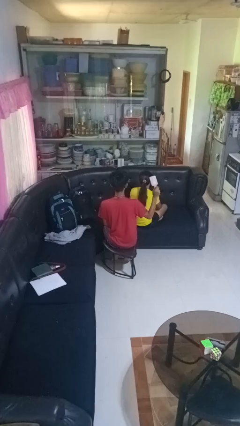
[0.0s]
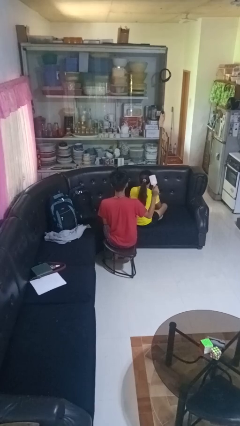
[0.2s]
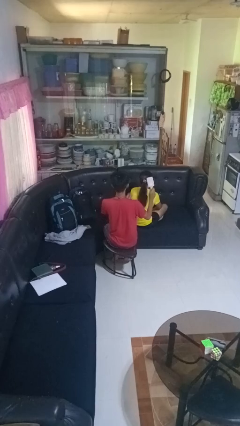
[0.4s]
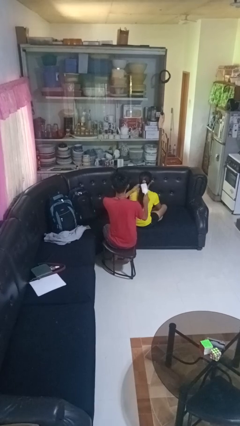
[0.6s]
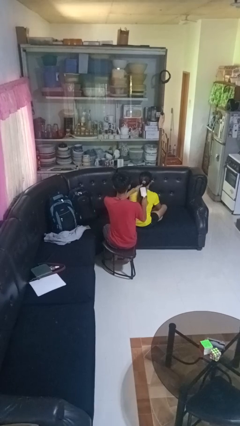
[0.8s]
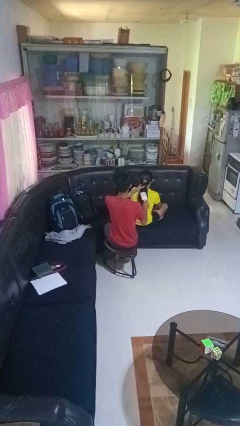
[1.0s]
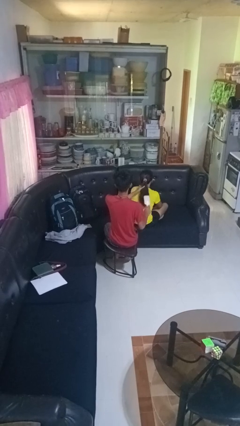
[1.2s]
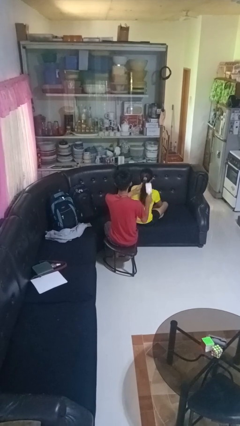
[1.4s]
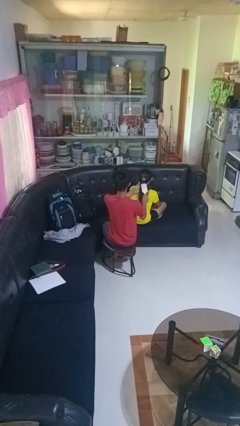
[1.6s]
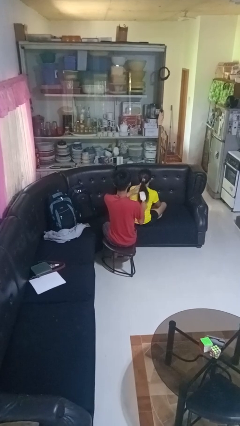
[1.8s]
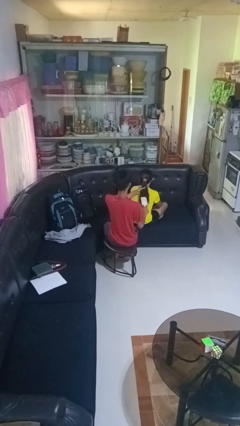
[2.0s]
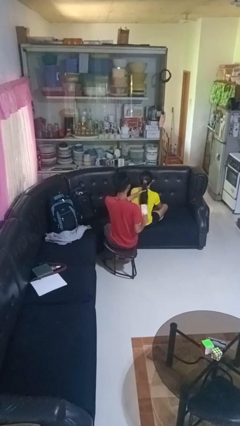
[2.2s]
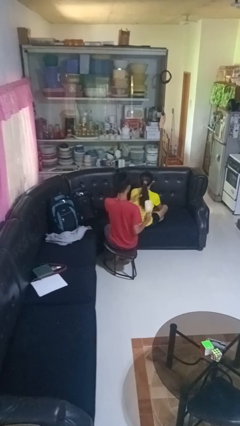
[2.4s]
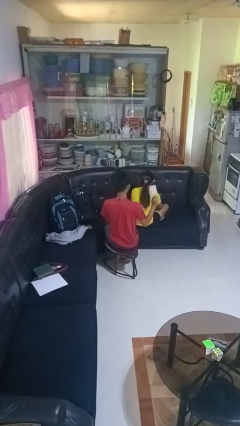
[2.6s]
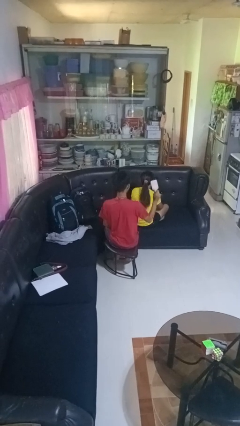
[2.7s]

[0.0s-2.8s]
person brushes hair of person

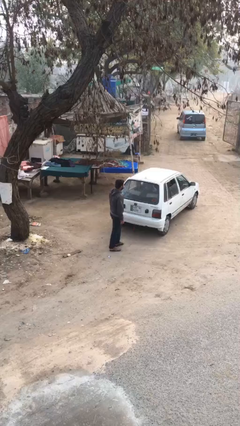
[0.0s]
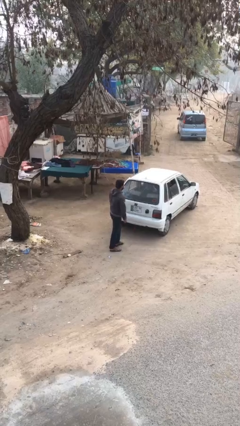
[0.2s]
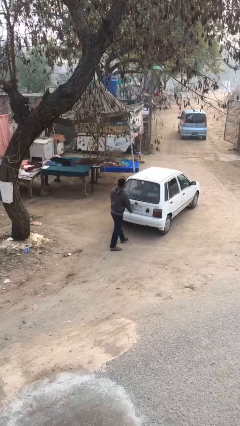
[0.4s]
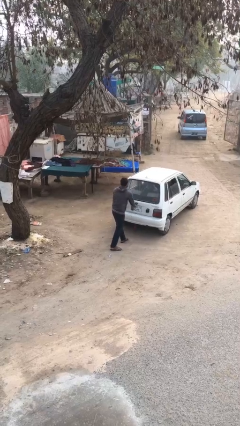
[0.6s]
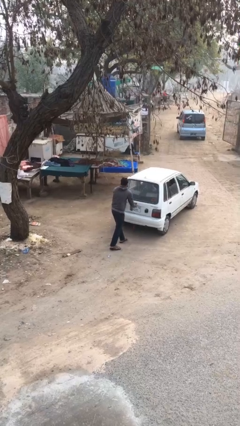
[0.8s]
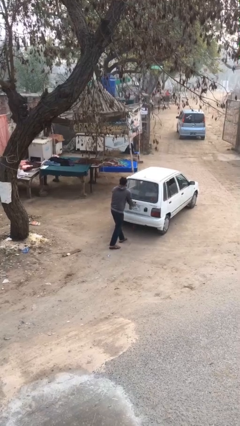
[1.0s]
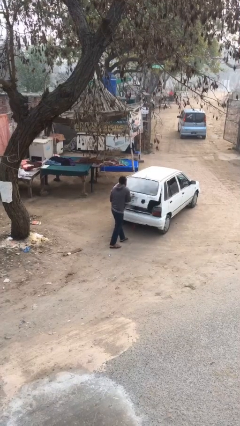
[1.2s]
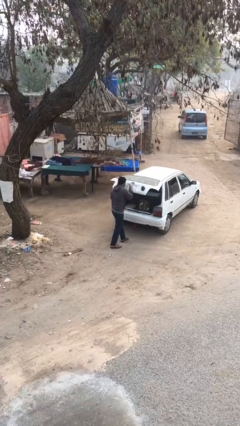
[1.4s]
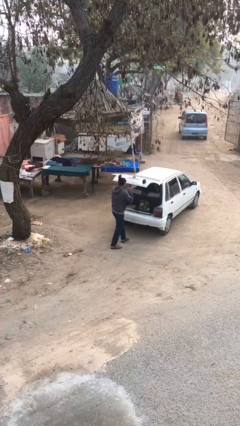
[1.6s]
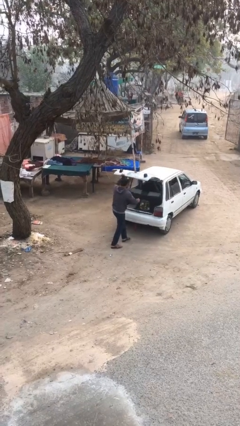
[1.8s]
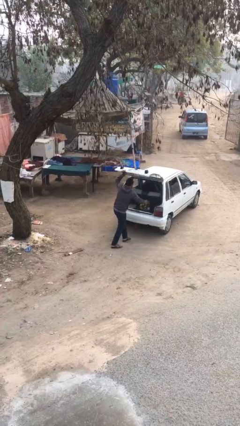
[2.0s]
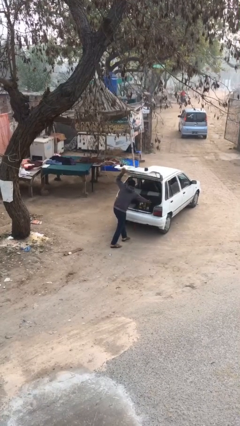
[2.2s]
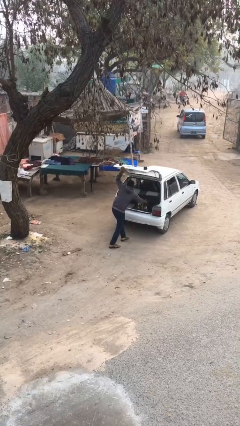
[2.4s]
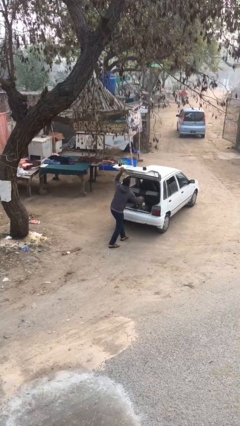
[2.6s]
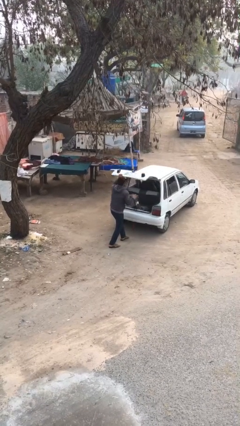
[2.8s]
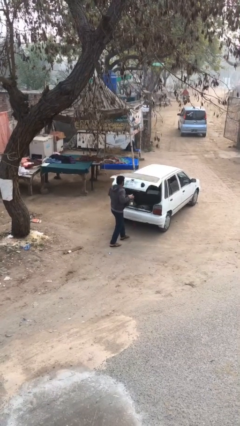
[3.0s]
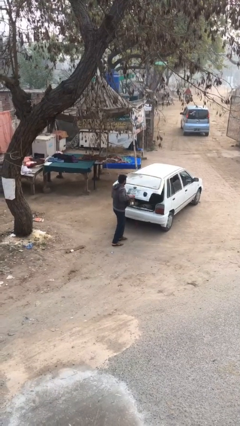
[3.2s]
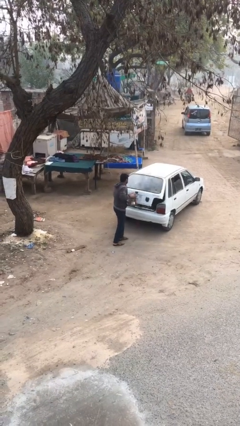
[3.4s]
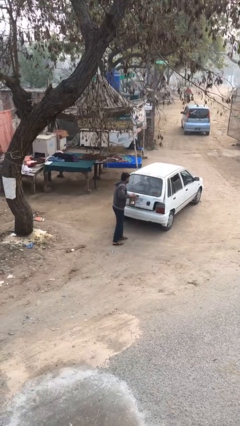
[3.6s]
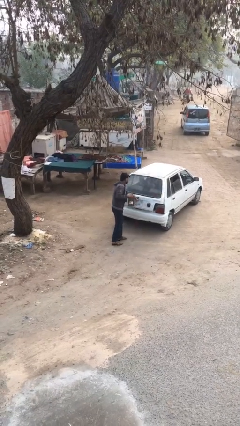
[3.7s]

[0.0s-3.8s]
person unloads car

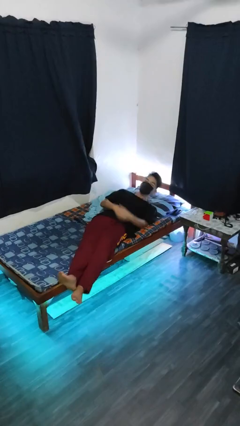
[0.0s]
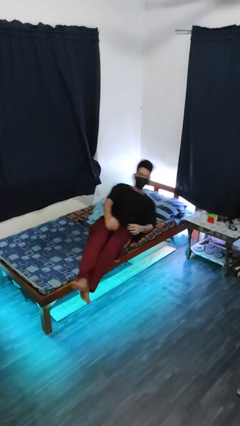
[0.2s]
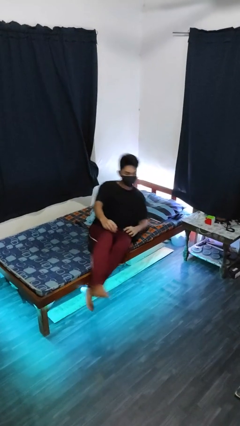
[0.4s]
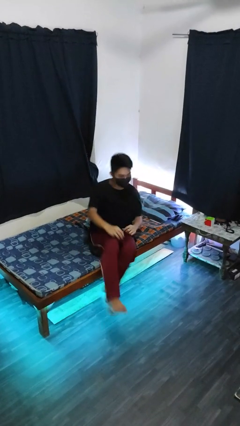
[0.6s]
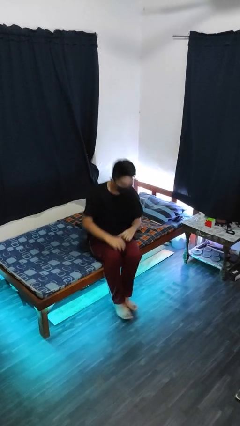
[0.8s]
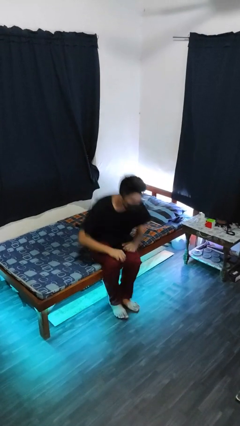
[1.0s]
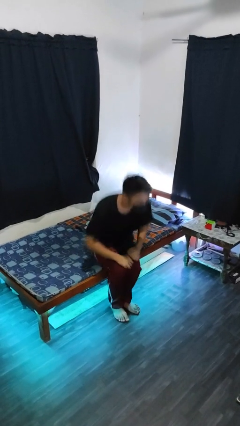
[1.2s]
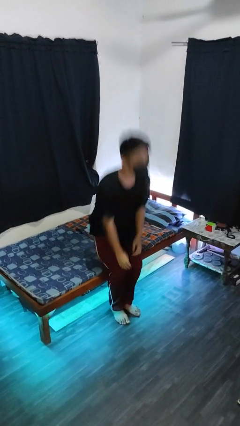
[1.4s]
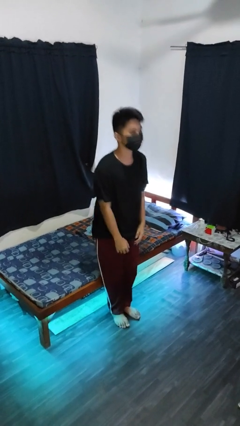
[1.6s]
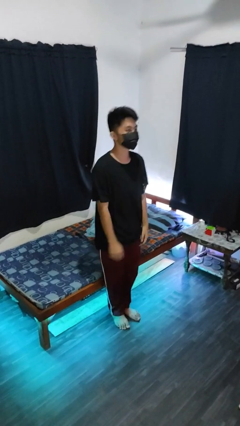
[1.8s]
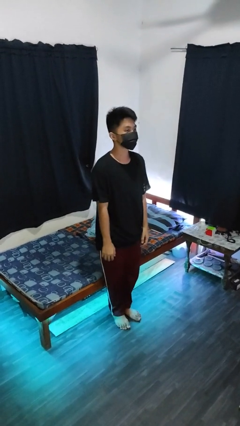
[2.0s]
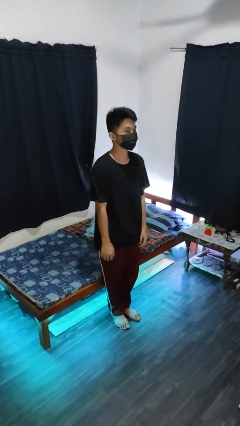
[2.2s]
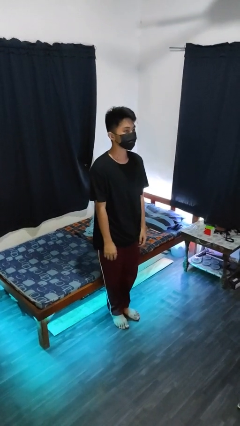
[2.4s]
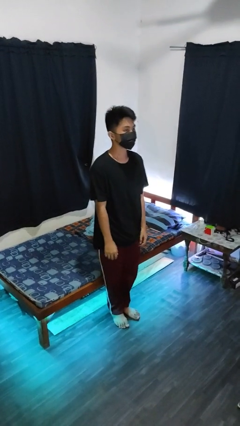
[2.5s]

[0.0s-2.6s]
person stands up

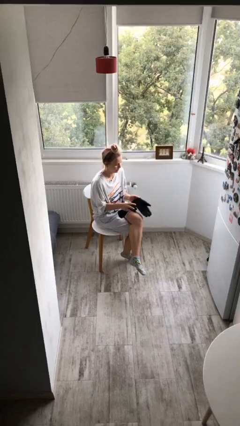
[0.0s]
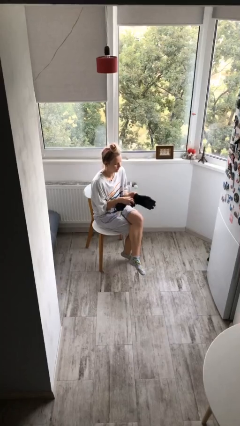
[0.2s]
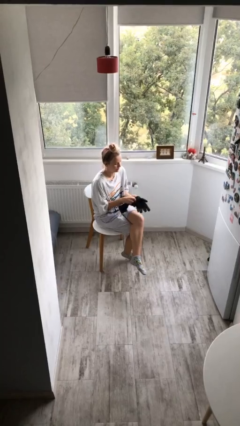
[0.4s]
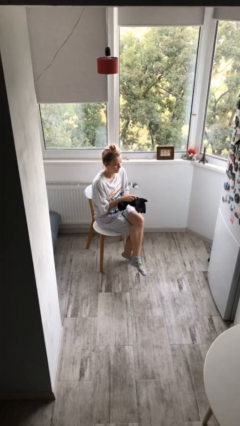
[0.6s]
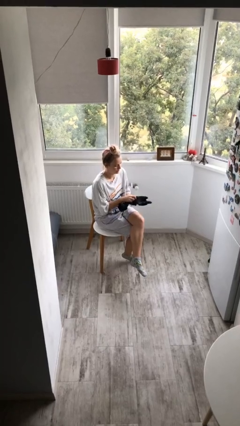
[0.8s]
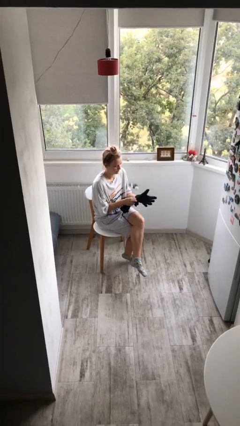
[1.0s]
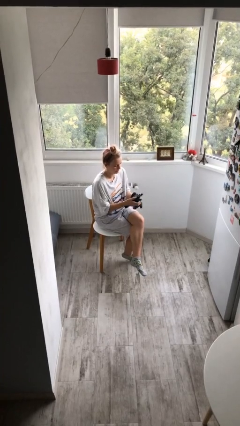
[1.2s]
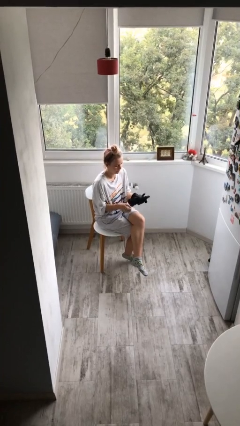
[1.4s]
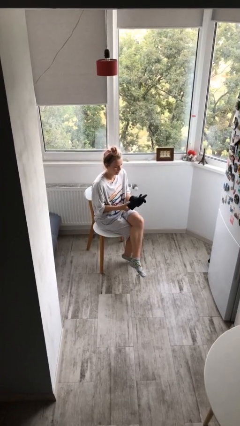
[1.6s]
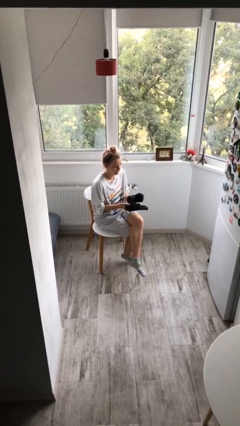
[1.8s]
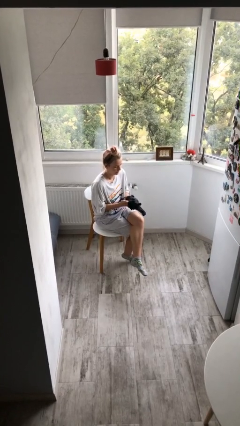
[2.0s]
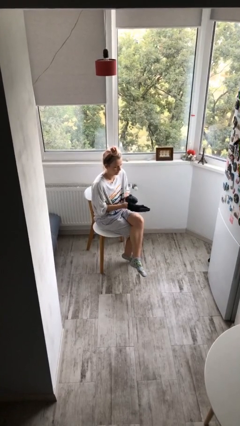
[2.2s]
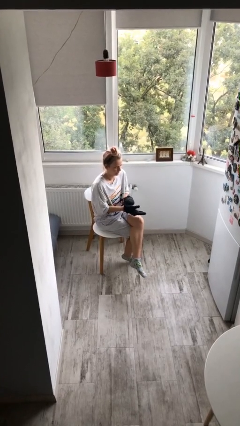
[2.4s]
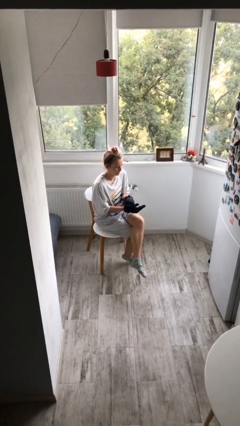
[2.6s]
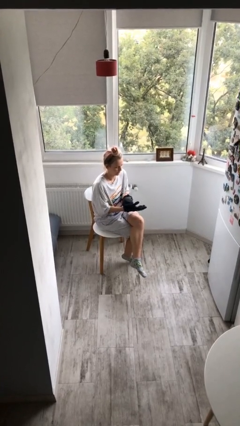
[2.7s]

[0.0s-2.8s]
person puts on gloves

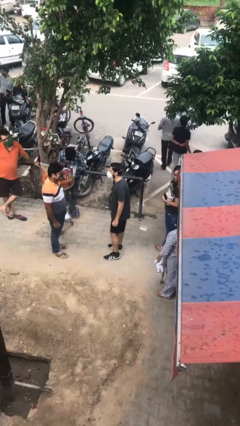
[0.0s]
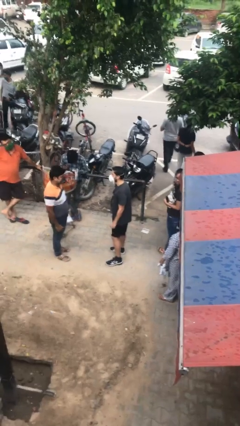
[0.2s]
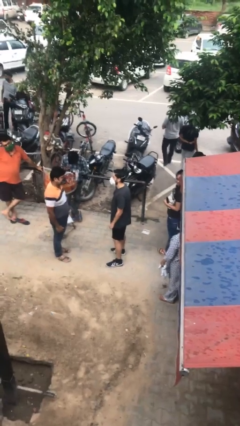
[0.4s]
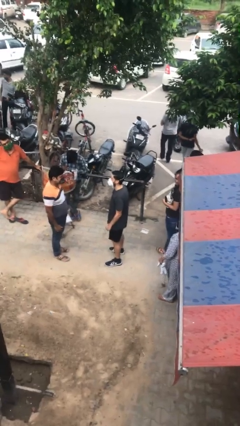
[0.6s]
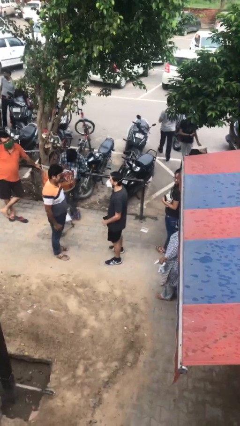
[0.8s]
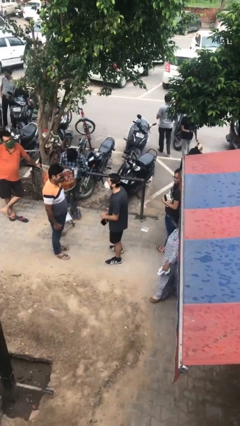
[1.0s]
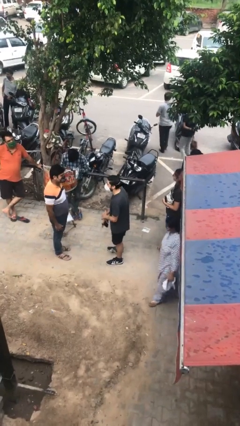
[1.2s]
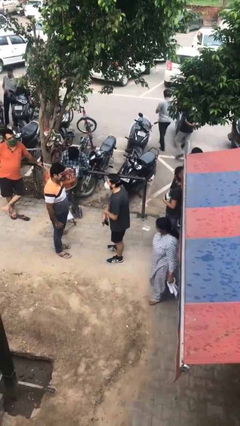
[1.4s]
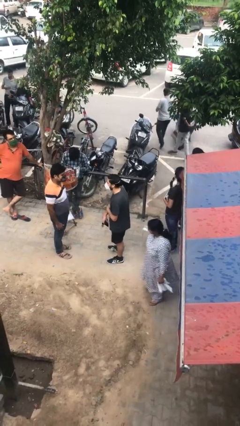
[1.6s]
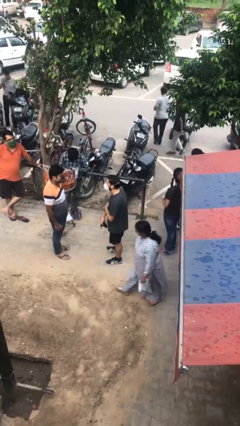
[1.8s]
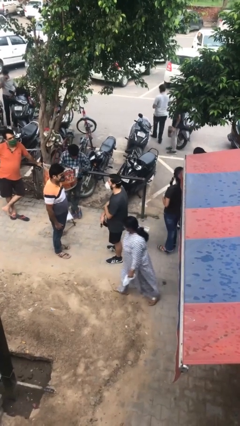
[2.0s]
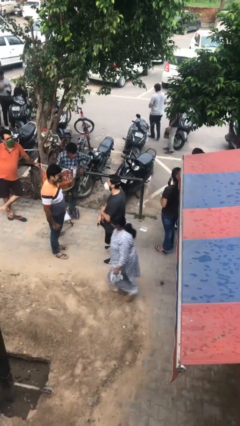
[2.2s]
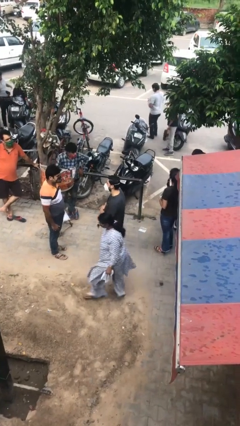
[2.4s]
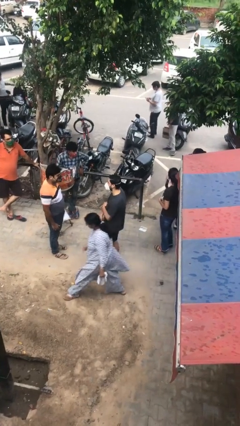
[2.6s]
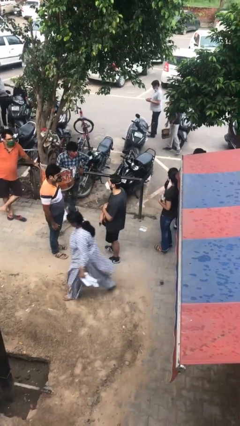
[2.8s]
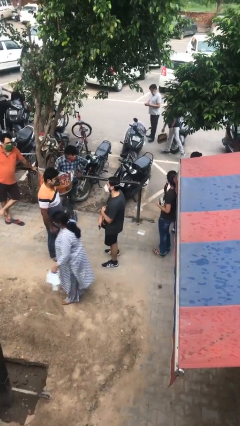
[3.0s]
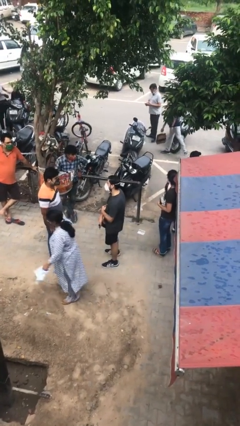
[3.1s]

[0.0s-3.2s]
person talks to person

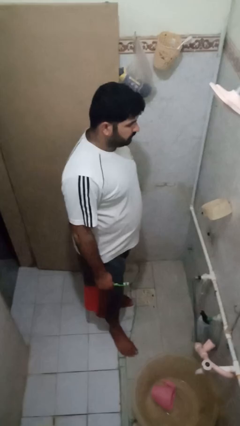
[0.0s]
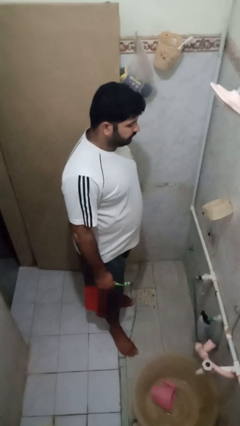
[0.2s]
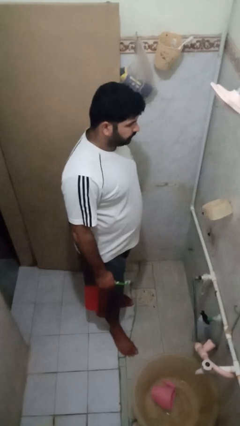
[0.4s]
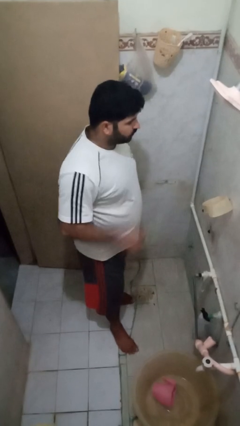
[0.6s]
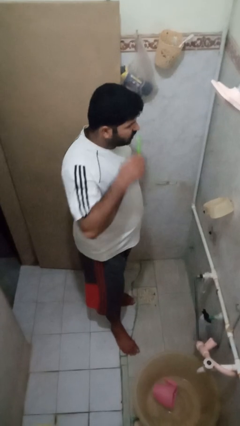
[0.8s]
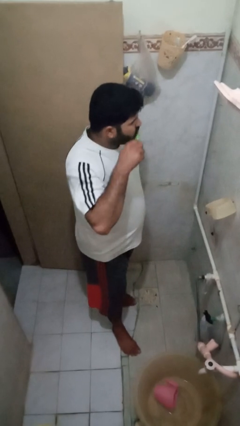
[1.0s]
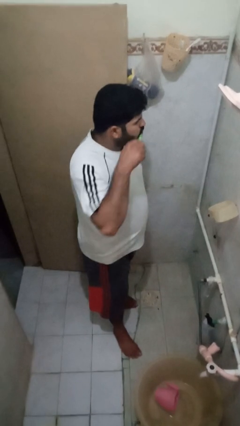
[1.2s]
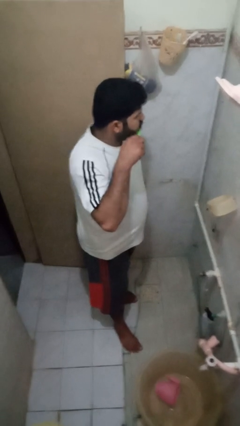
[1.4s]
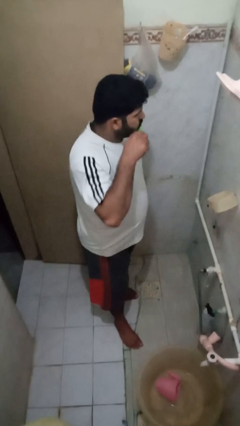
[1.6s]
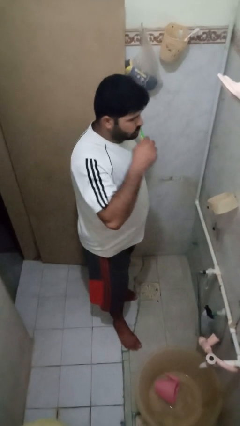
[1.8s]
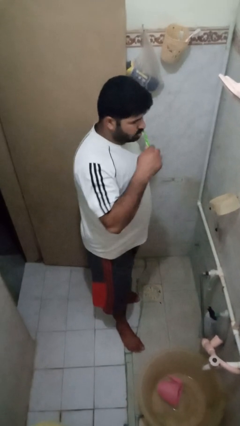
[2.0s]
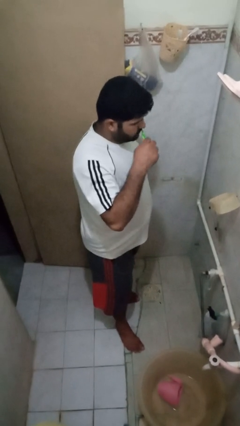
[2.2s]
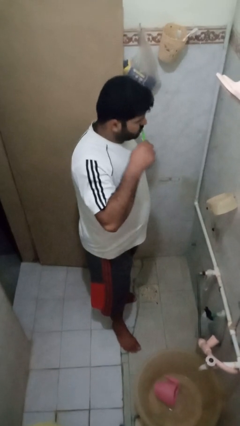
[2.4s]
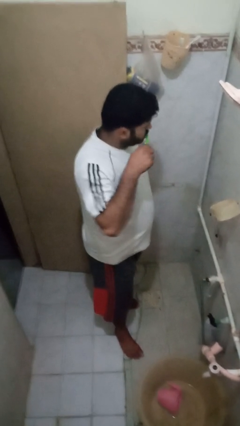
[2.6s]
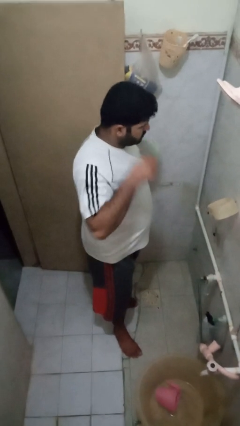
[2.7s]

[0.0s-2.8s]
person brushes teeth
